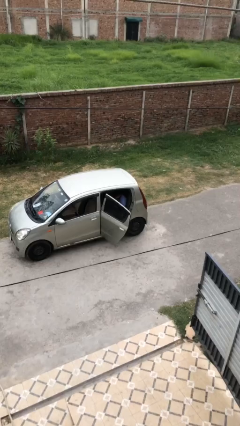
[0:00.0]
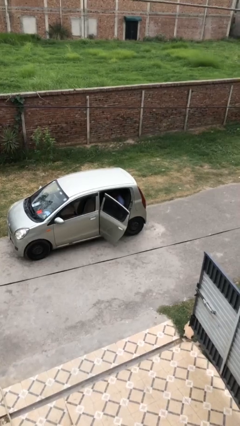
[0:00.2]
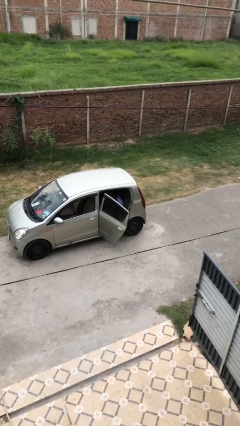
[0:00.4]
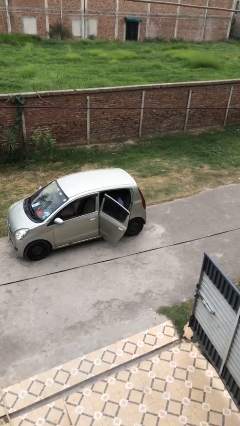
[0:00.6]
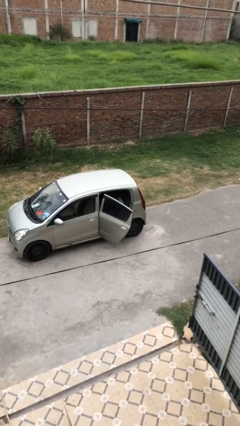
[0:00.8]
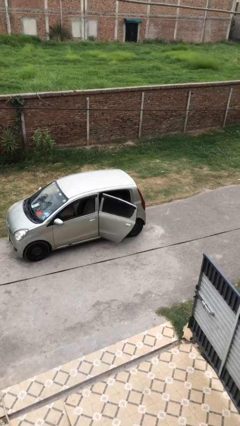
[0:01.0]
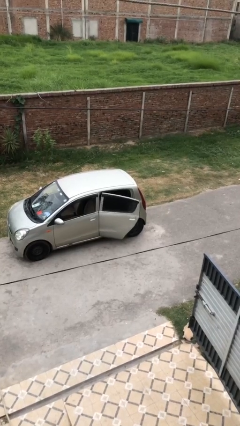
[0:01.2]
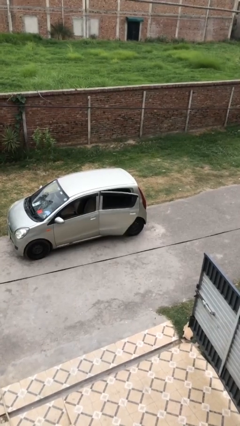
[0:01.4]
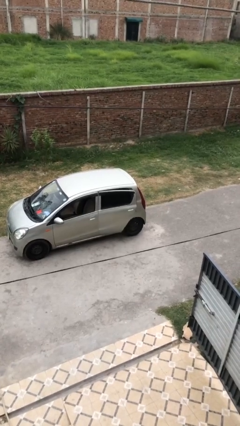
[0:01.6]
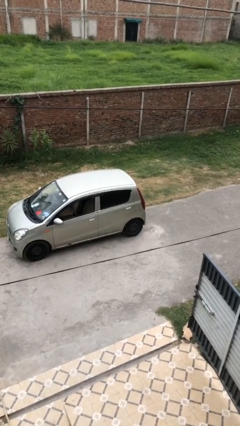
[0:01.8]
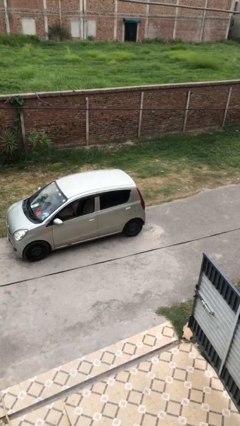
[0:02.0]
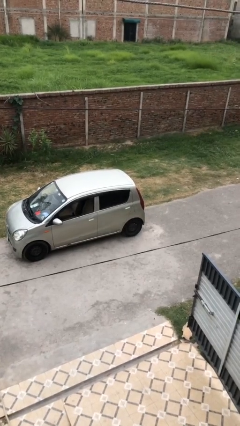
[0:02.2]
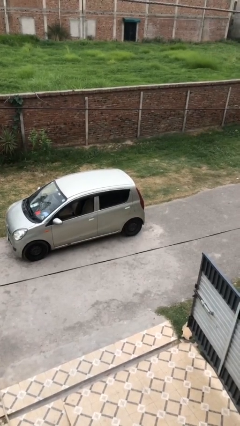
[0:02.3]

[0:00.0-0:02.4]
person closes car door

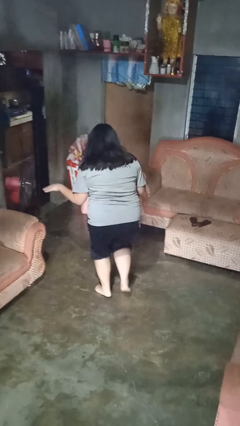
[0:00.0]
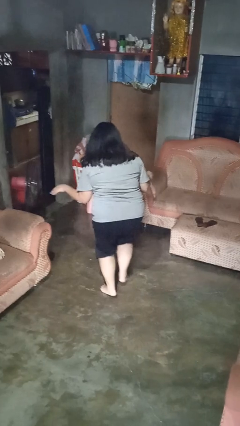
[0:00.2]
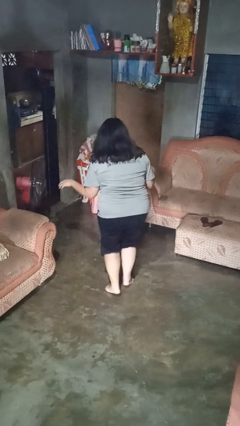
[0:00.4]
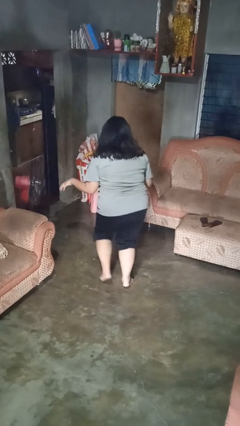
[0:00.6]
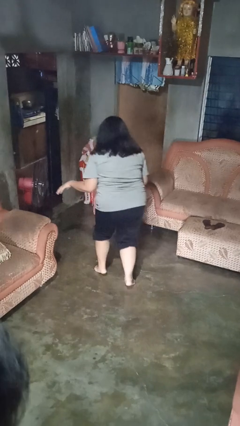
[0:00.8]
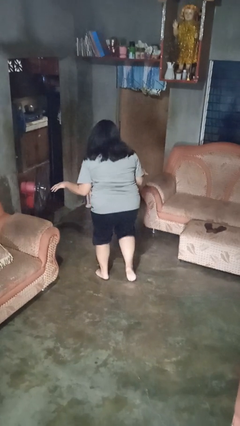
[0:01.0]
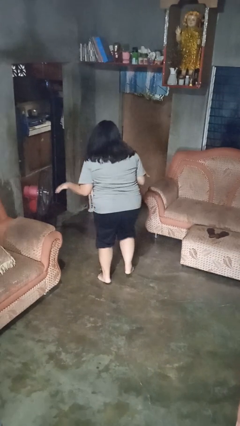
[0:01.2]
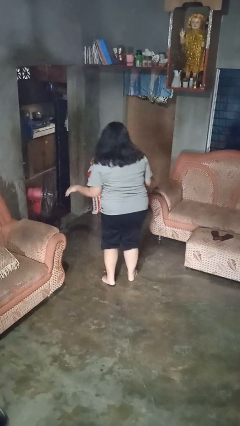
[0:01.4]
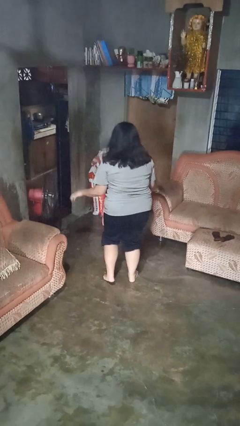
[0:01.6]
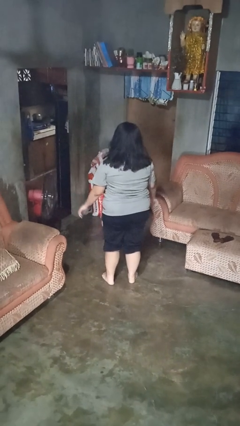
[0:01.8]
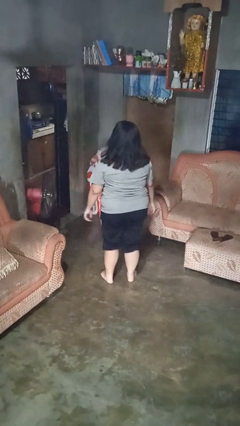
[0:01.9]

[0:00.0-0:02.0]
person walks tiptoe

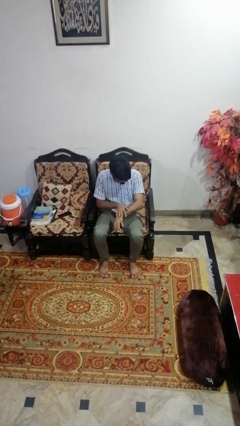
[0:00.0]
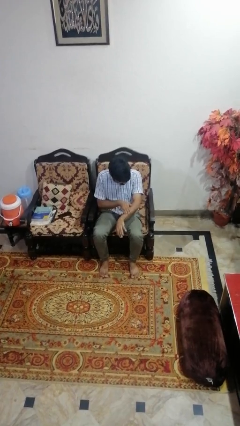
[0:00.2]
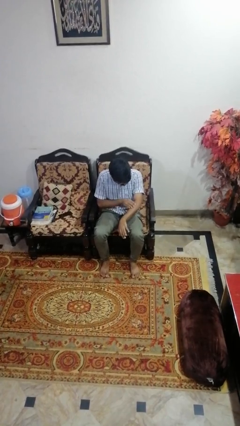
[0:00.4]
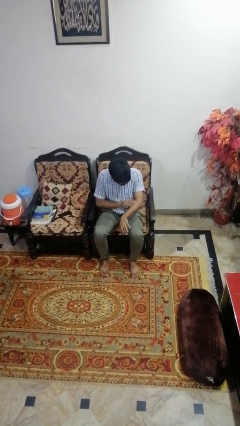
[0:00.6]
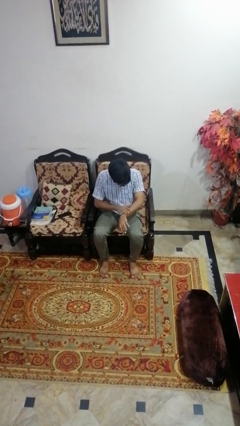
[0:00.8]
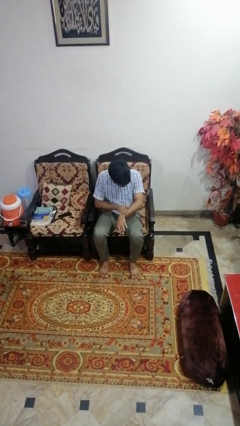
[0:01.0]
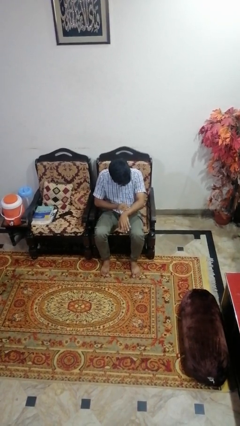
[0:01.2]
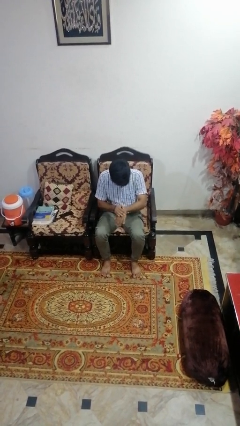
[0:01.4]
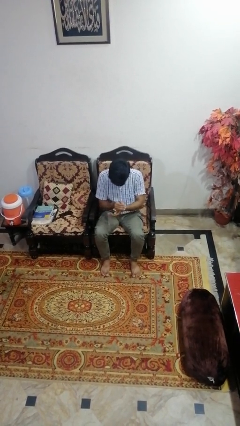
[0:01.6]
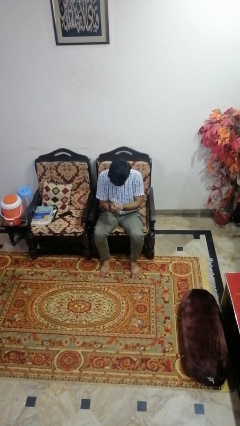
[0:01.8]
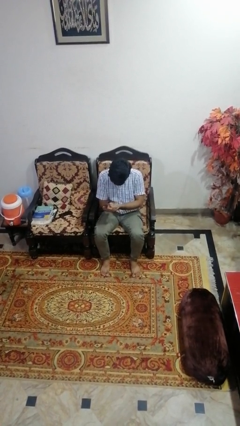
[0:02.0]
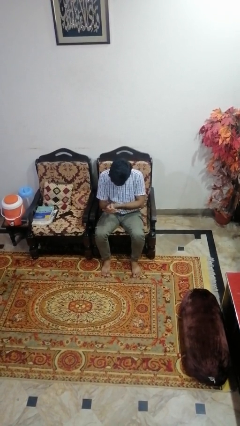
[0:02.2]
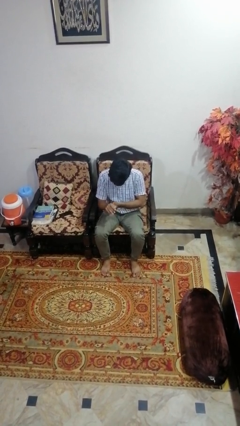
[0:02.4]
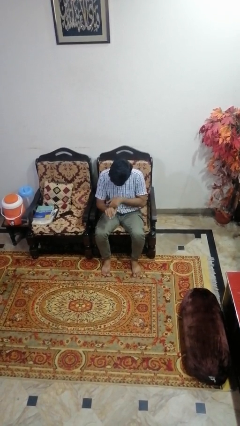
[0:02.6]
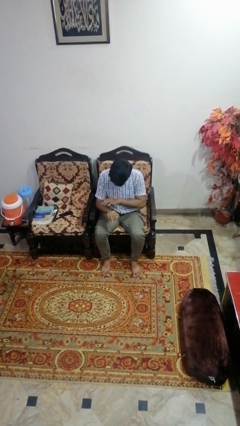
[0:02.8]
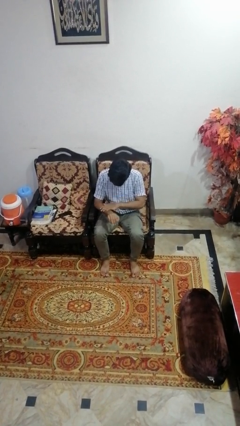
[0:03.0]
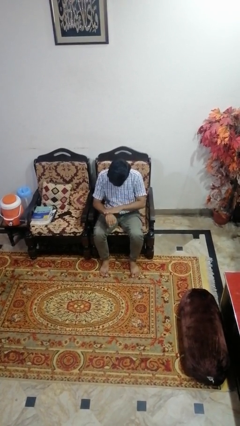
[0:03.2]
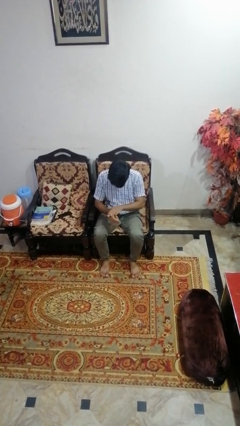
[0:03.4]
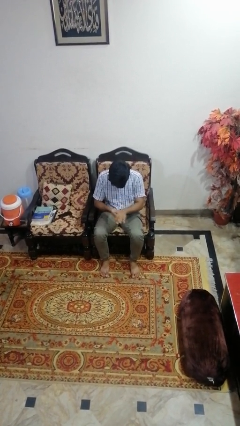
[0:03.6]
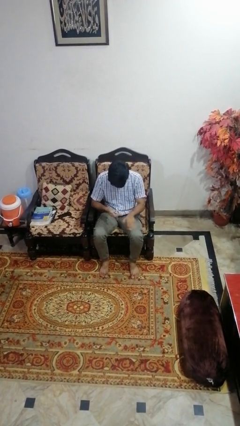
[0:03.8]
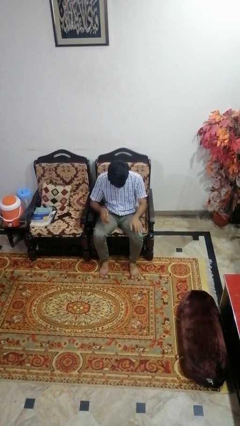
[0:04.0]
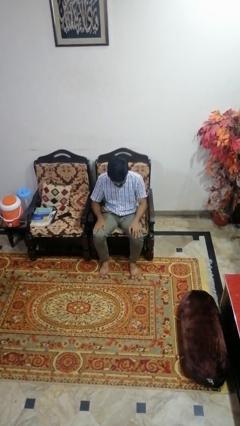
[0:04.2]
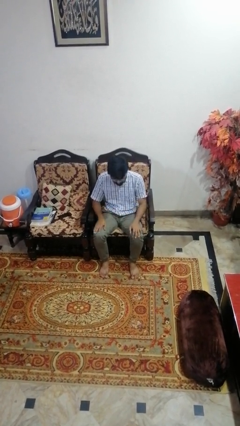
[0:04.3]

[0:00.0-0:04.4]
person looks at hands in lap

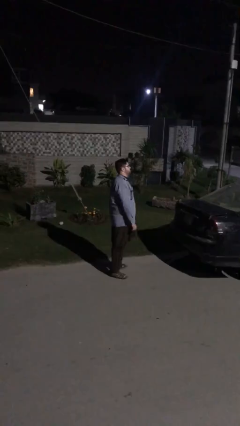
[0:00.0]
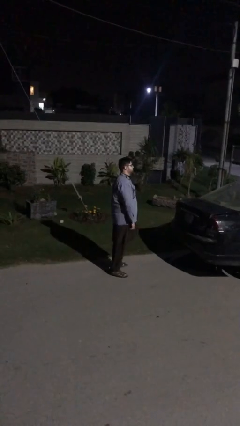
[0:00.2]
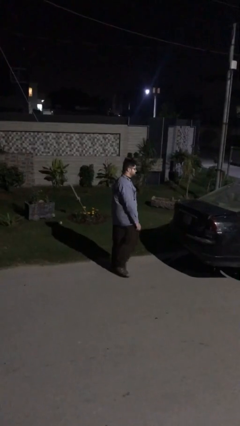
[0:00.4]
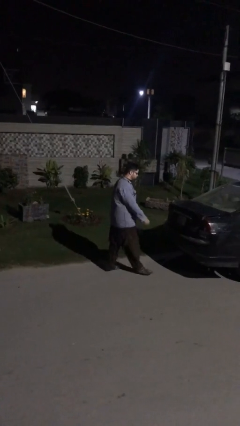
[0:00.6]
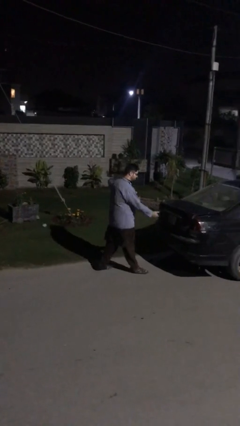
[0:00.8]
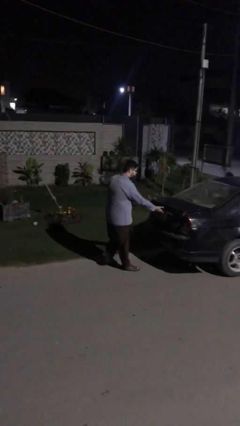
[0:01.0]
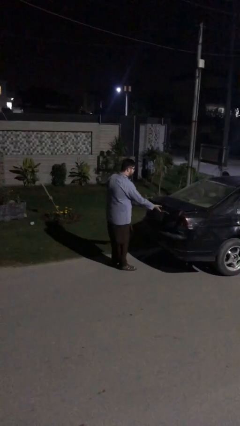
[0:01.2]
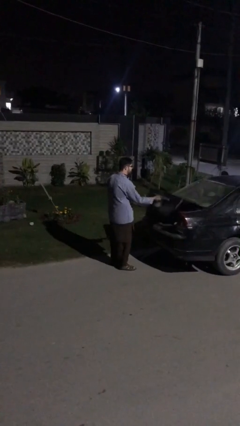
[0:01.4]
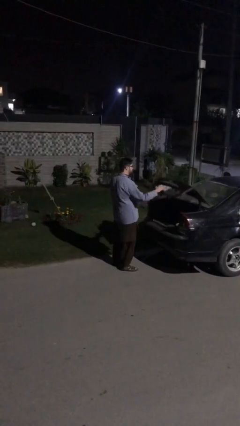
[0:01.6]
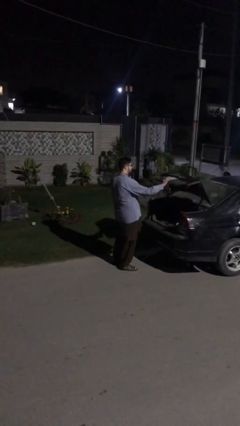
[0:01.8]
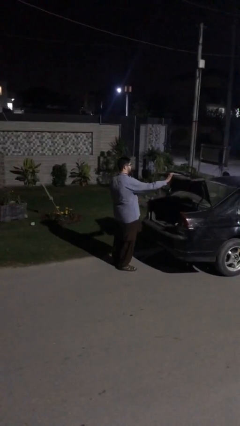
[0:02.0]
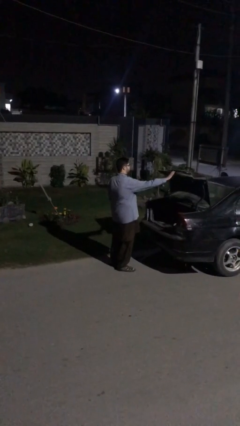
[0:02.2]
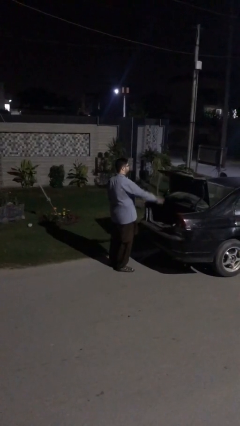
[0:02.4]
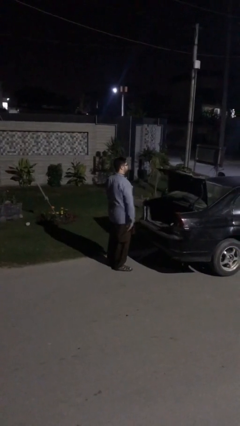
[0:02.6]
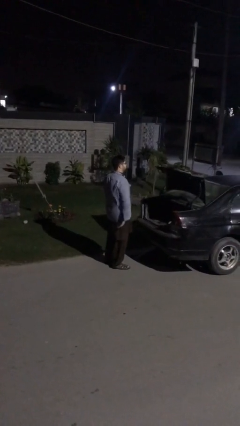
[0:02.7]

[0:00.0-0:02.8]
person opens car trunk

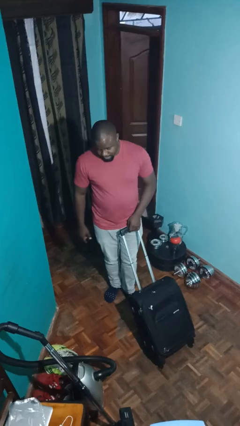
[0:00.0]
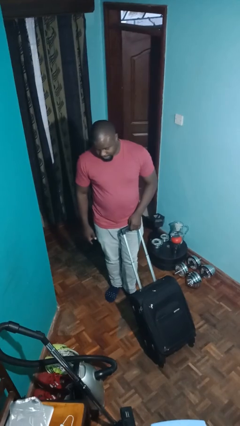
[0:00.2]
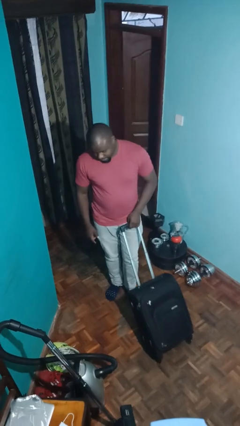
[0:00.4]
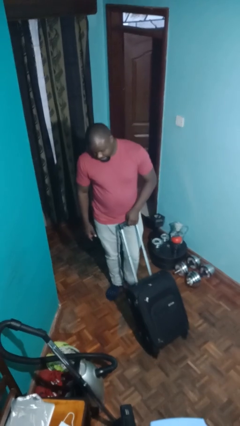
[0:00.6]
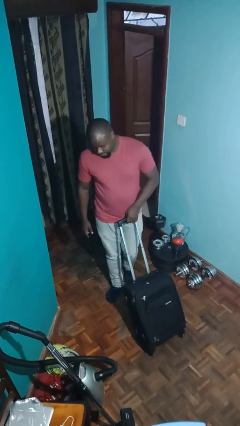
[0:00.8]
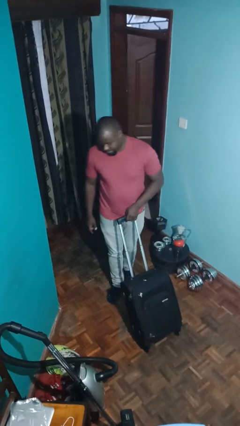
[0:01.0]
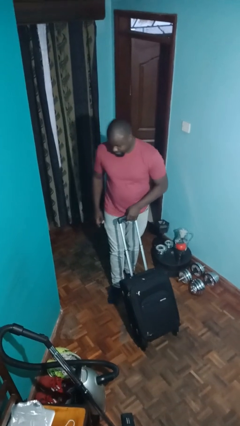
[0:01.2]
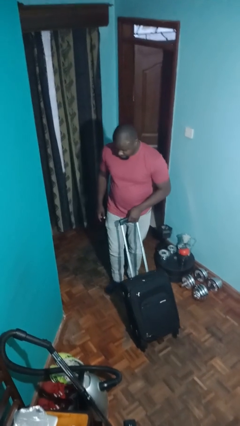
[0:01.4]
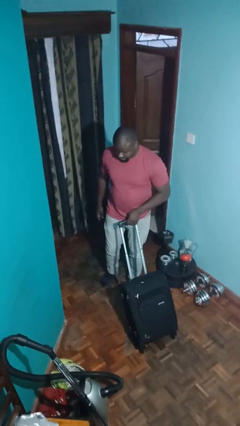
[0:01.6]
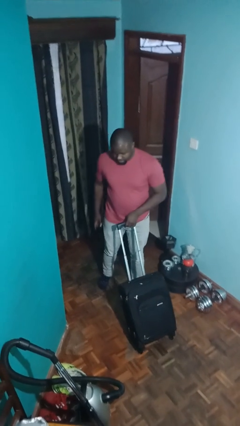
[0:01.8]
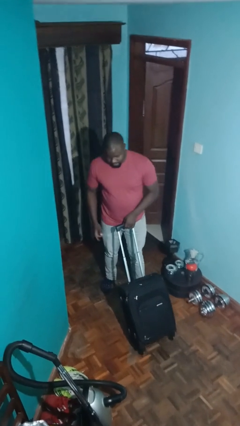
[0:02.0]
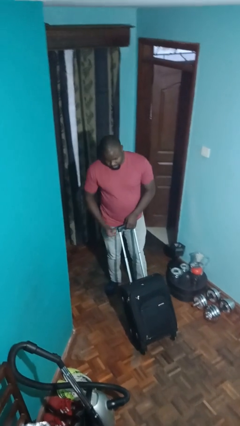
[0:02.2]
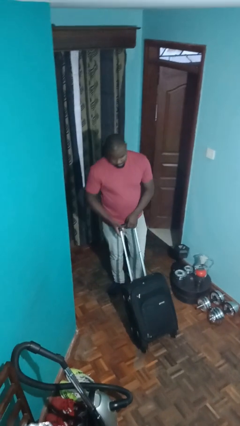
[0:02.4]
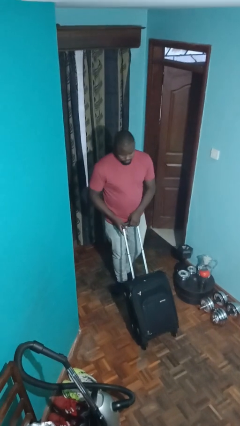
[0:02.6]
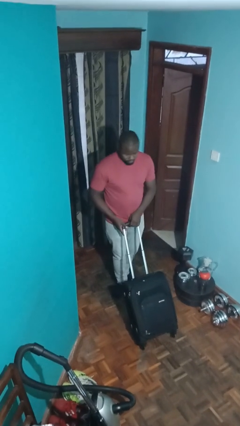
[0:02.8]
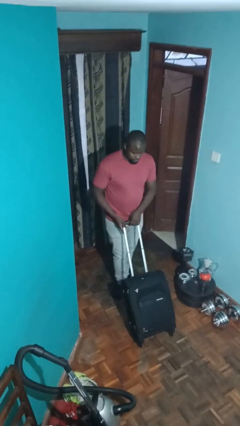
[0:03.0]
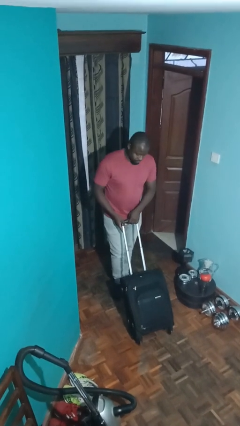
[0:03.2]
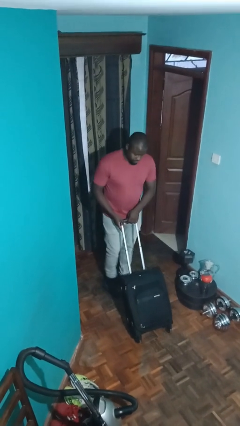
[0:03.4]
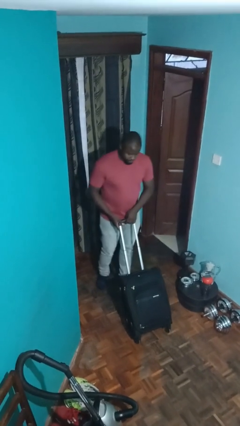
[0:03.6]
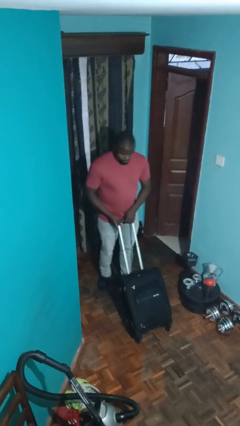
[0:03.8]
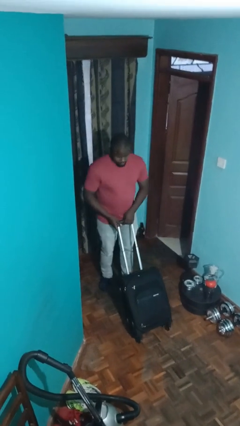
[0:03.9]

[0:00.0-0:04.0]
person pulls wheeled cart

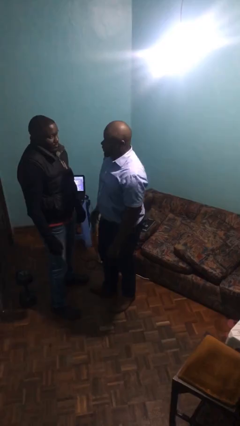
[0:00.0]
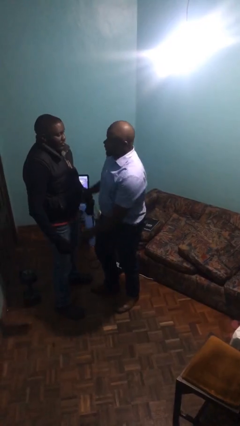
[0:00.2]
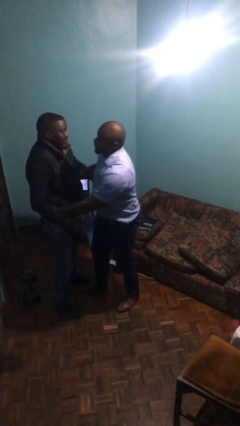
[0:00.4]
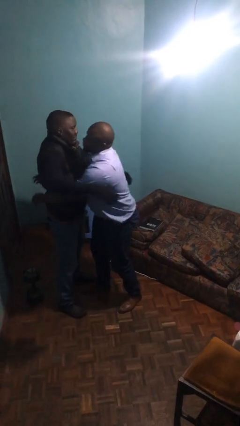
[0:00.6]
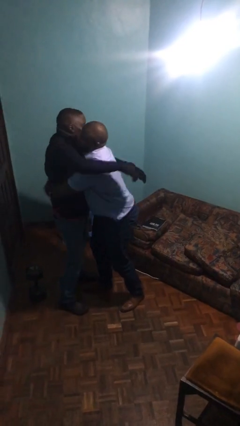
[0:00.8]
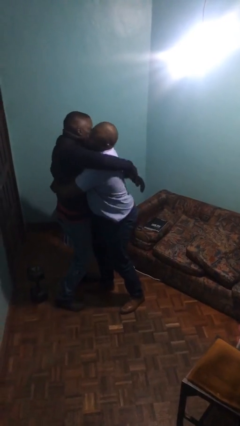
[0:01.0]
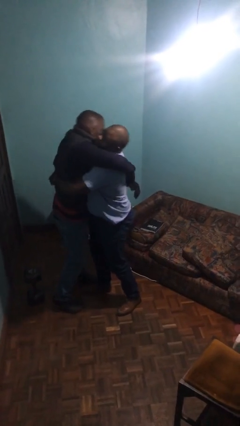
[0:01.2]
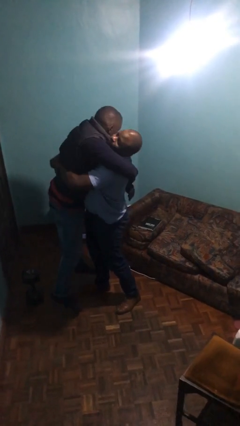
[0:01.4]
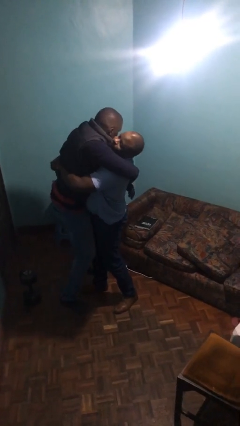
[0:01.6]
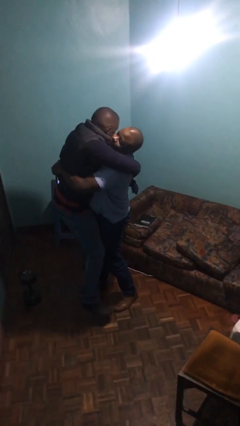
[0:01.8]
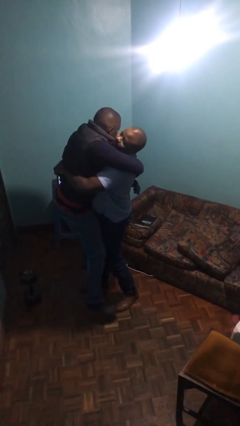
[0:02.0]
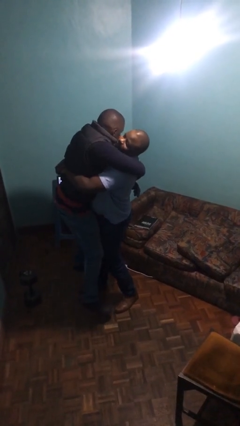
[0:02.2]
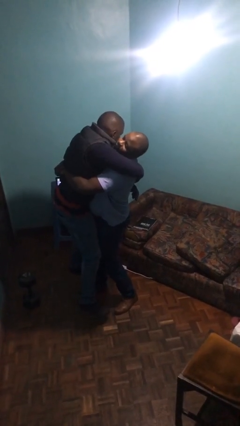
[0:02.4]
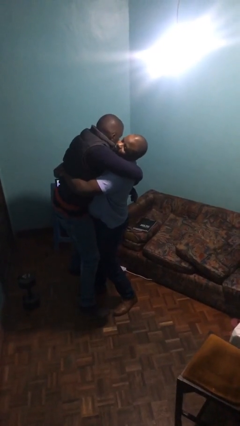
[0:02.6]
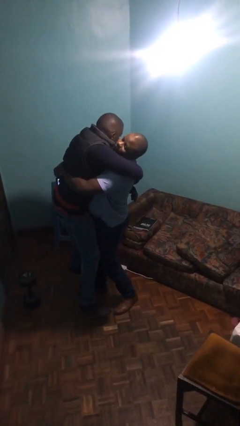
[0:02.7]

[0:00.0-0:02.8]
person picks up person
